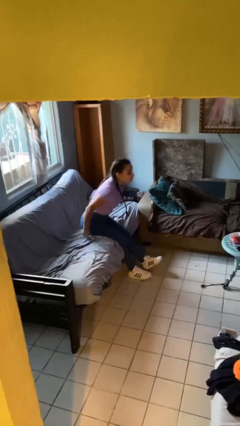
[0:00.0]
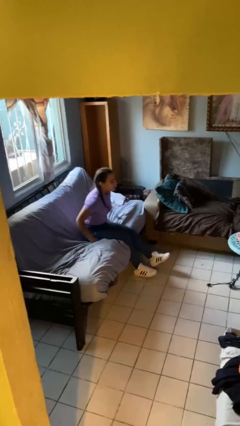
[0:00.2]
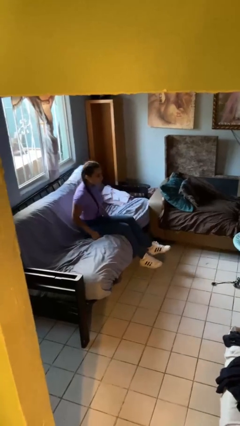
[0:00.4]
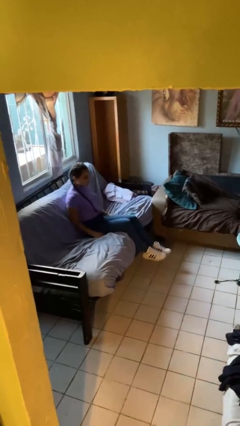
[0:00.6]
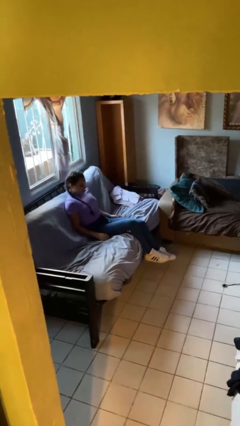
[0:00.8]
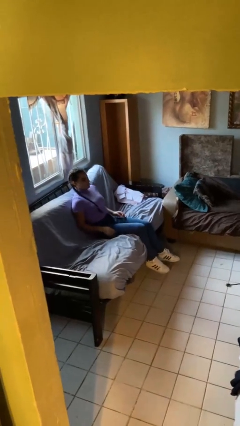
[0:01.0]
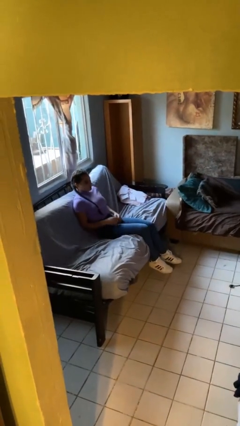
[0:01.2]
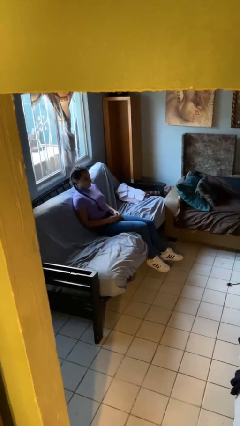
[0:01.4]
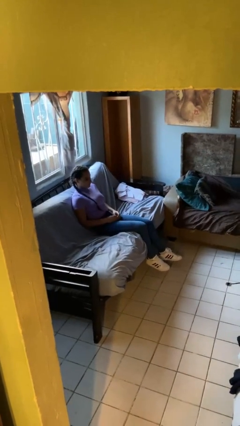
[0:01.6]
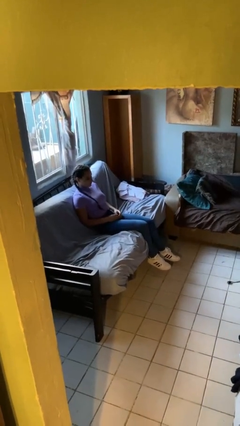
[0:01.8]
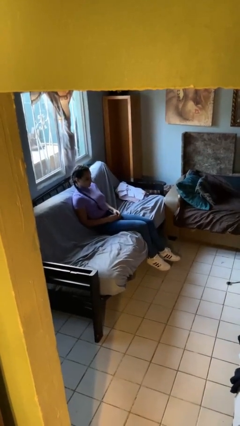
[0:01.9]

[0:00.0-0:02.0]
person lies down on couch

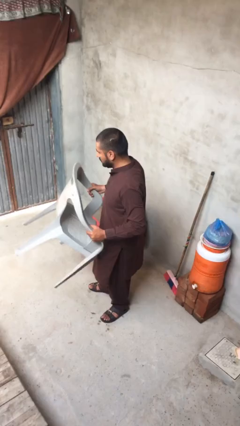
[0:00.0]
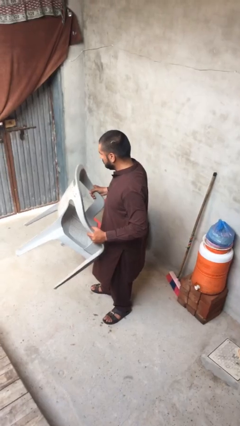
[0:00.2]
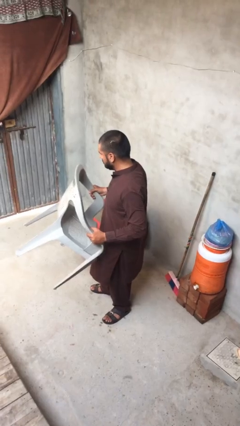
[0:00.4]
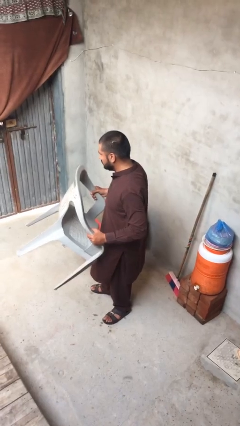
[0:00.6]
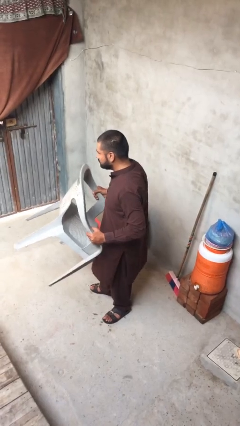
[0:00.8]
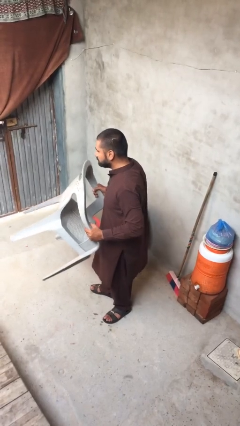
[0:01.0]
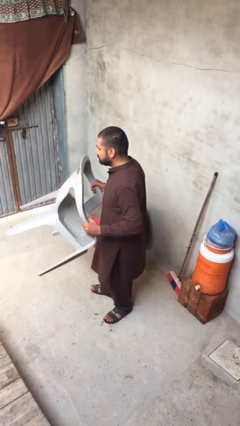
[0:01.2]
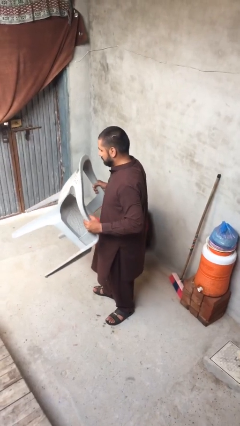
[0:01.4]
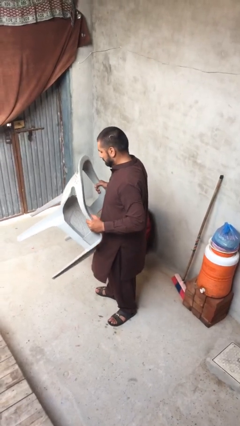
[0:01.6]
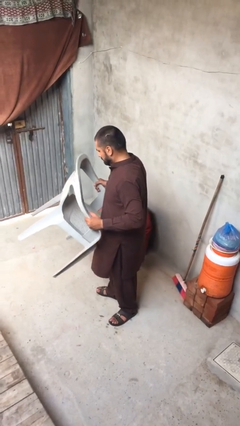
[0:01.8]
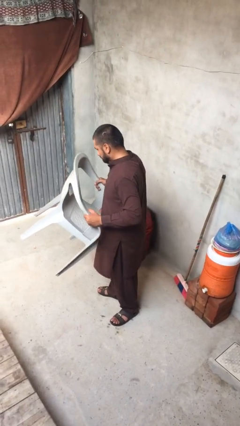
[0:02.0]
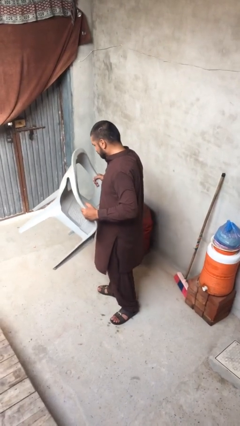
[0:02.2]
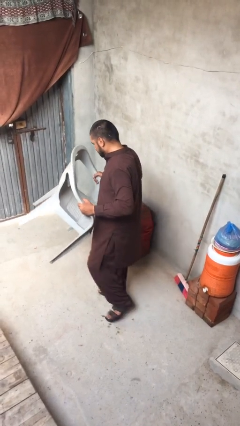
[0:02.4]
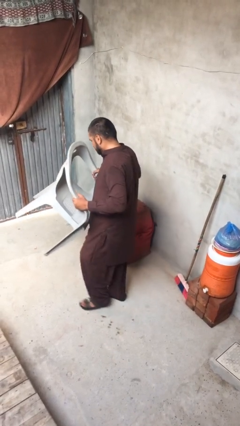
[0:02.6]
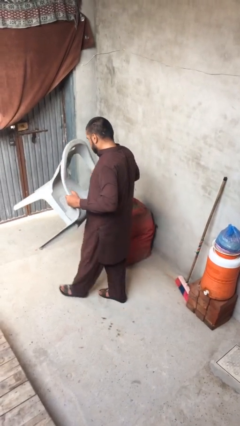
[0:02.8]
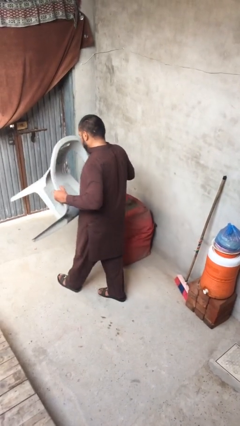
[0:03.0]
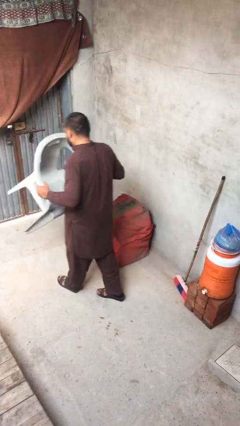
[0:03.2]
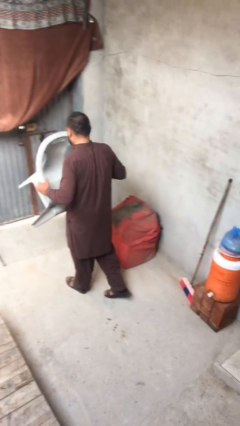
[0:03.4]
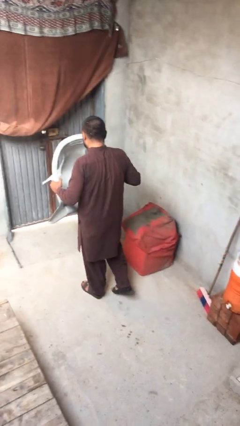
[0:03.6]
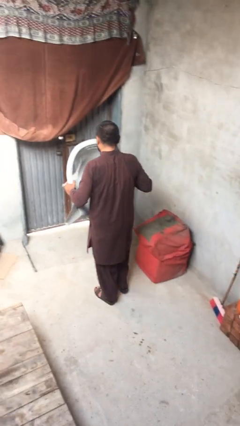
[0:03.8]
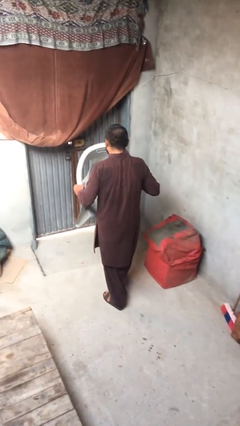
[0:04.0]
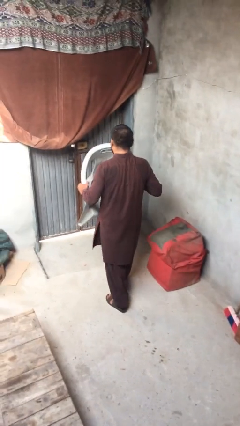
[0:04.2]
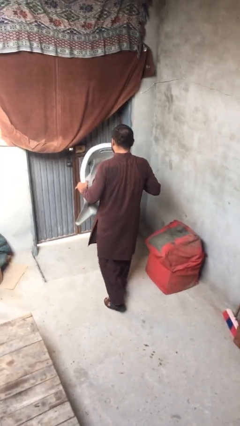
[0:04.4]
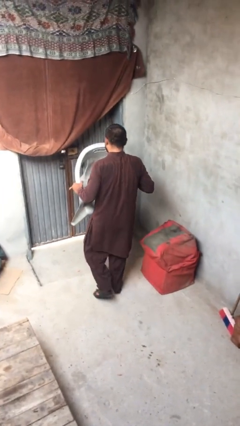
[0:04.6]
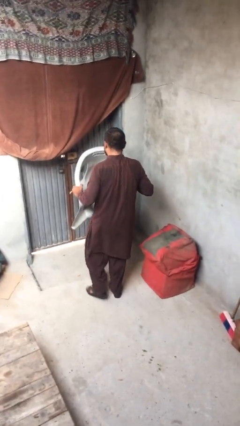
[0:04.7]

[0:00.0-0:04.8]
person carries heavy object

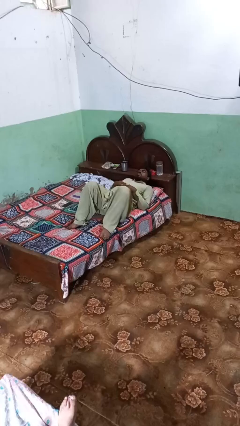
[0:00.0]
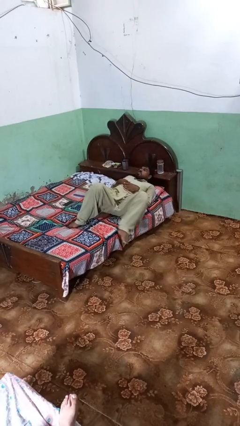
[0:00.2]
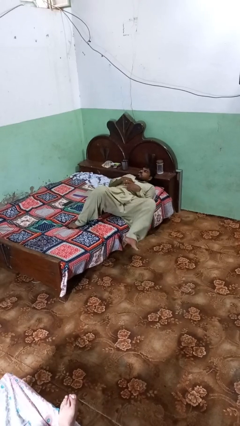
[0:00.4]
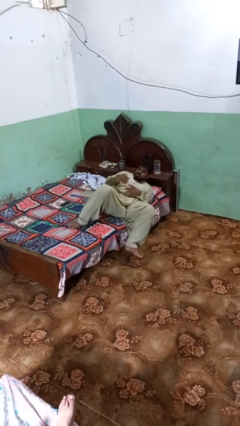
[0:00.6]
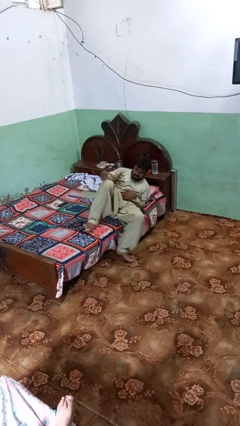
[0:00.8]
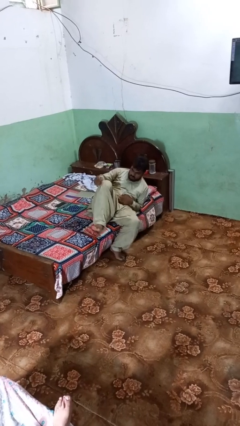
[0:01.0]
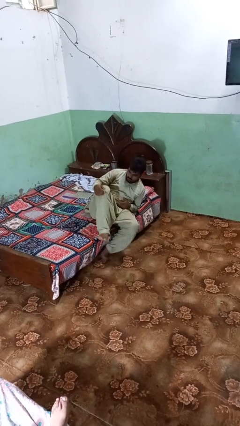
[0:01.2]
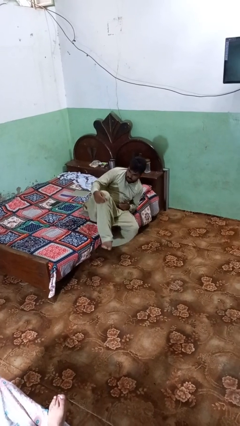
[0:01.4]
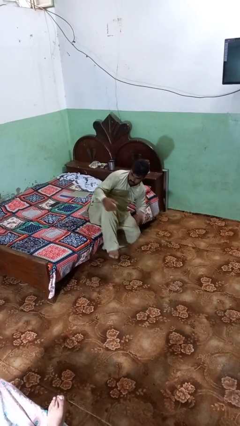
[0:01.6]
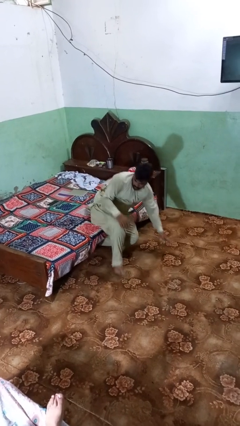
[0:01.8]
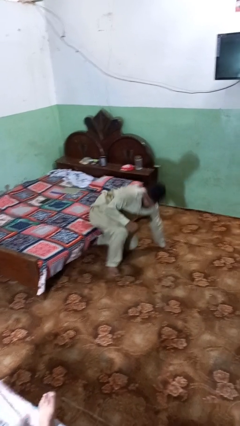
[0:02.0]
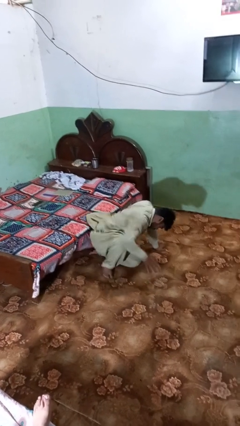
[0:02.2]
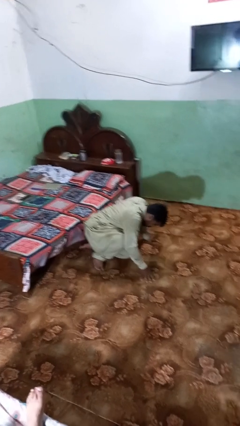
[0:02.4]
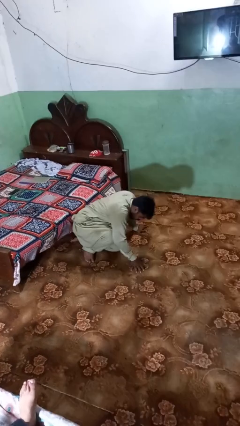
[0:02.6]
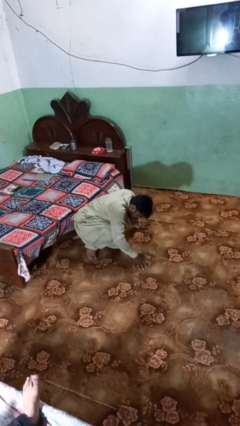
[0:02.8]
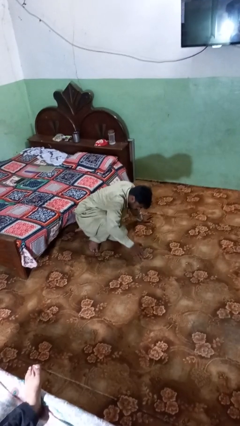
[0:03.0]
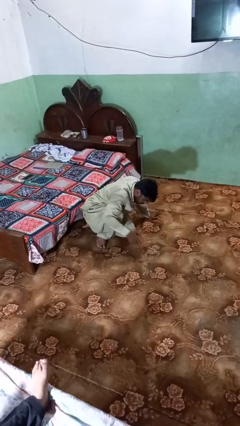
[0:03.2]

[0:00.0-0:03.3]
person falls from bed

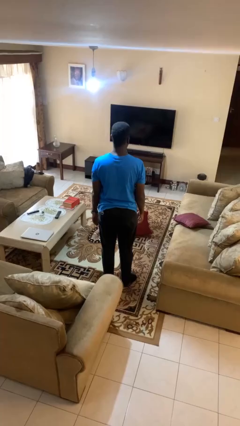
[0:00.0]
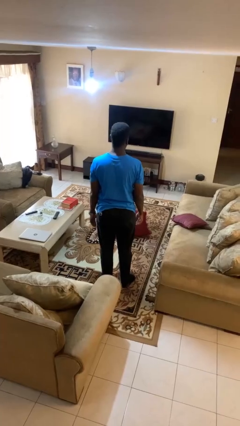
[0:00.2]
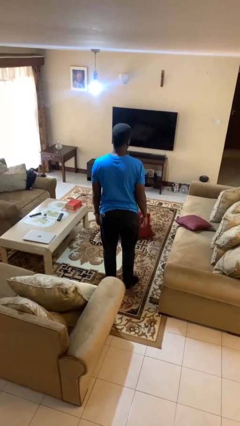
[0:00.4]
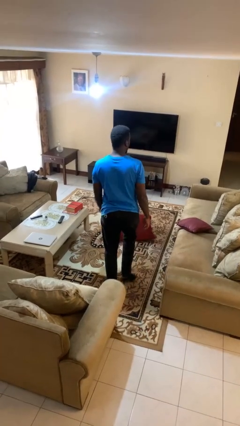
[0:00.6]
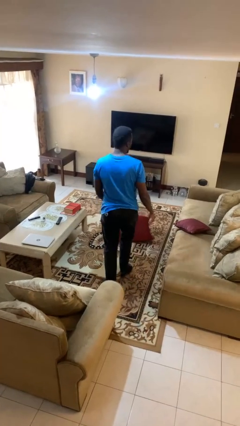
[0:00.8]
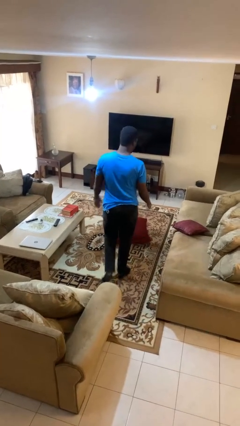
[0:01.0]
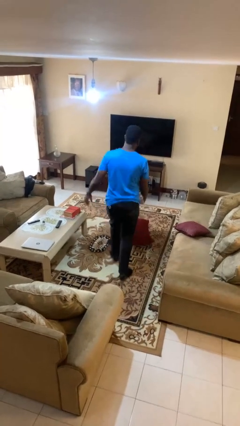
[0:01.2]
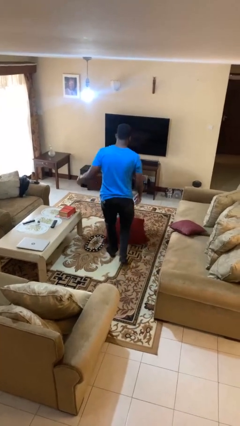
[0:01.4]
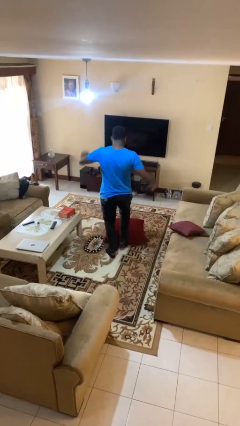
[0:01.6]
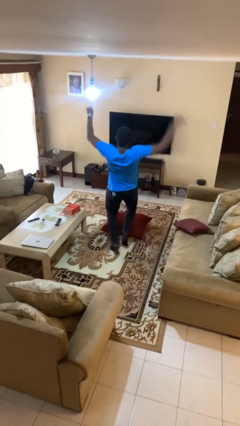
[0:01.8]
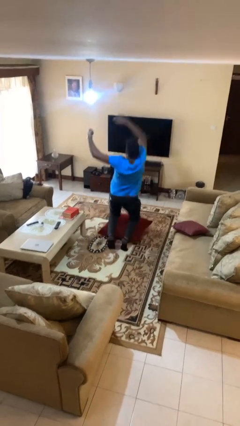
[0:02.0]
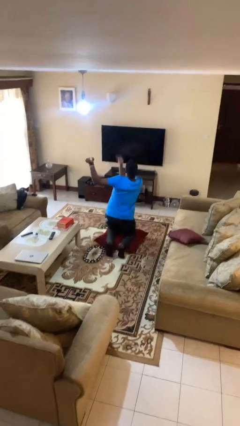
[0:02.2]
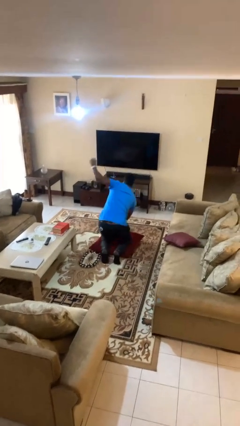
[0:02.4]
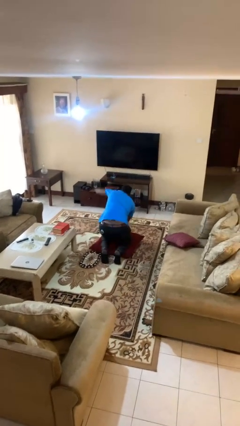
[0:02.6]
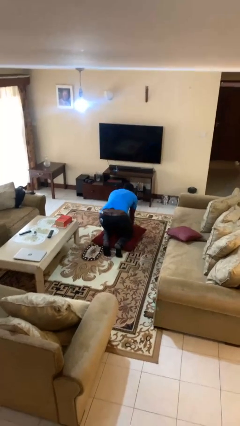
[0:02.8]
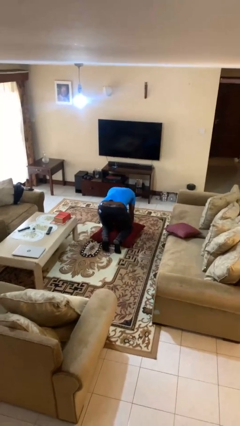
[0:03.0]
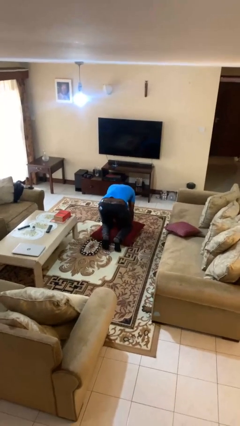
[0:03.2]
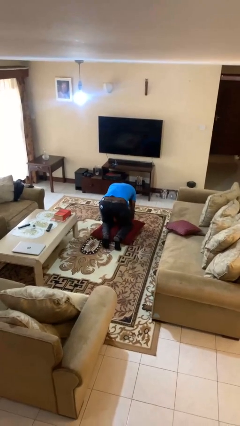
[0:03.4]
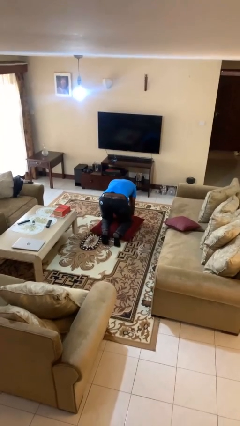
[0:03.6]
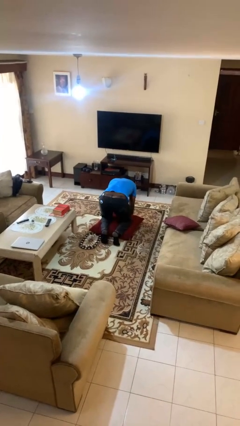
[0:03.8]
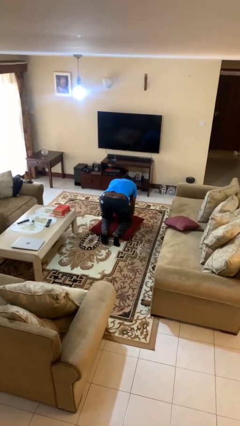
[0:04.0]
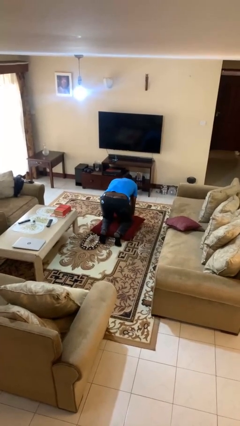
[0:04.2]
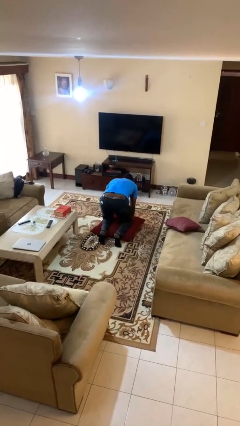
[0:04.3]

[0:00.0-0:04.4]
person trips on object on floor

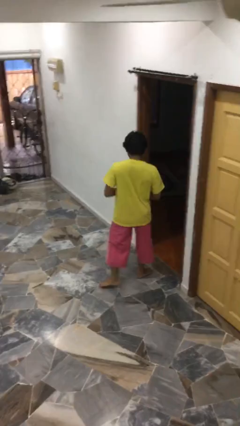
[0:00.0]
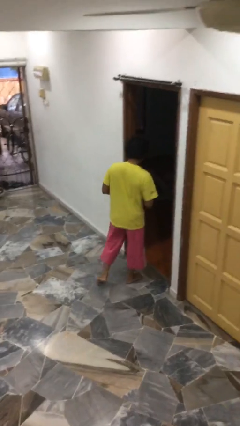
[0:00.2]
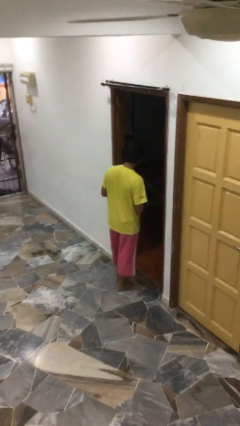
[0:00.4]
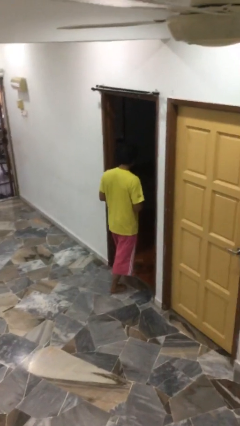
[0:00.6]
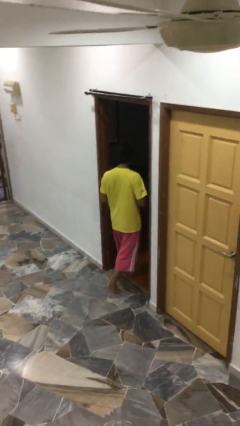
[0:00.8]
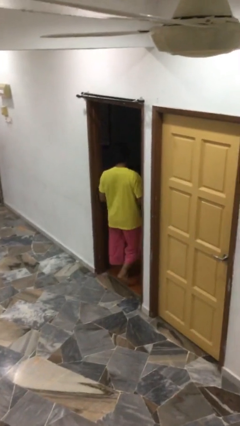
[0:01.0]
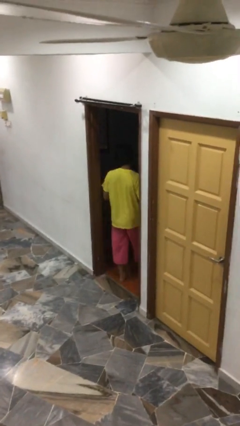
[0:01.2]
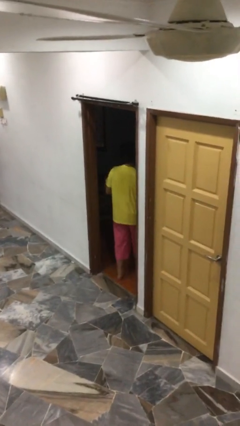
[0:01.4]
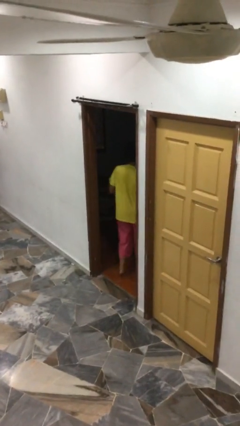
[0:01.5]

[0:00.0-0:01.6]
person exits scene through structure

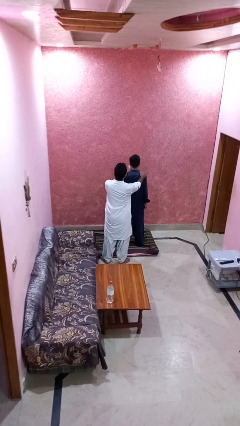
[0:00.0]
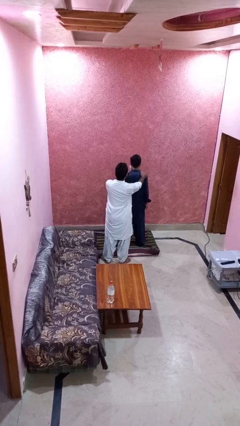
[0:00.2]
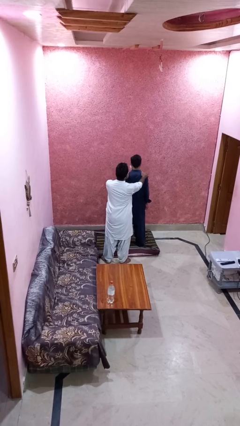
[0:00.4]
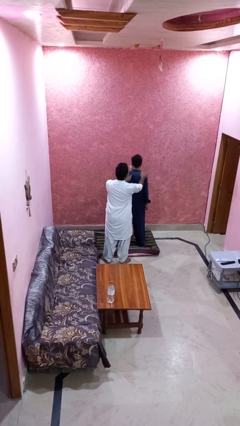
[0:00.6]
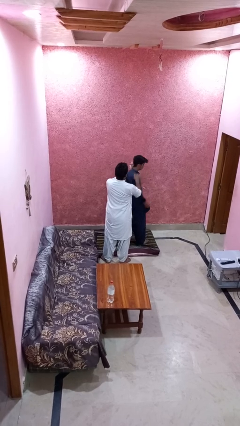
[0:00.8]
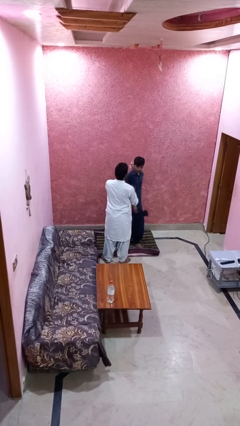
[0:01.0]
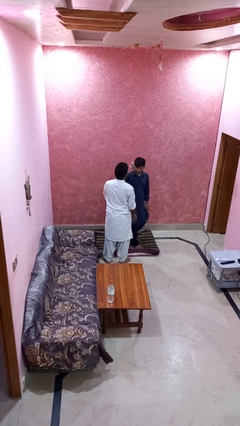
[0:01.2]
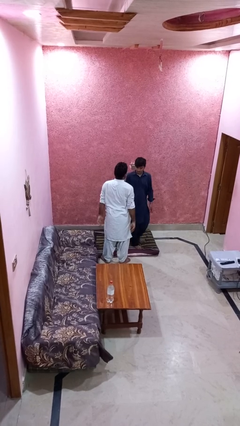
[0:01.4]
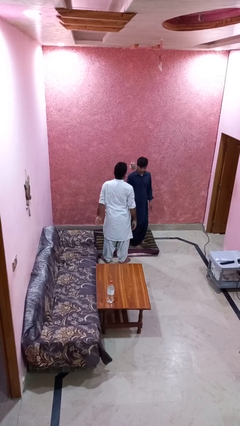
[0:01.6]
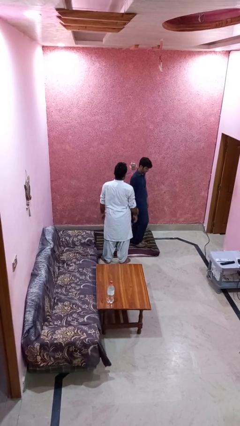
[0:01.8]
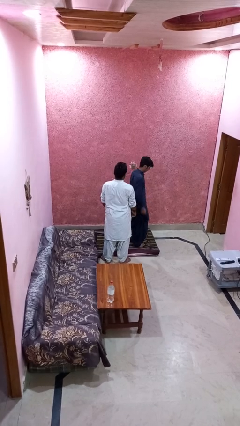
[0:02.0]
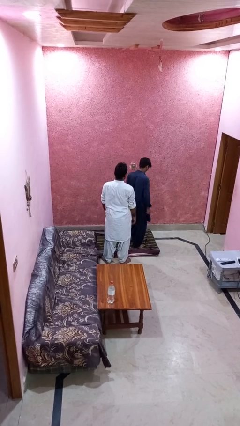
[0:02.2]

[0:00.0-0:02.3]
person spins person around
